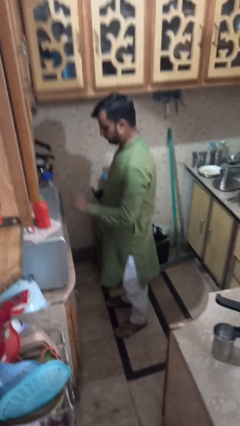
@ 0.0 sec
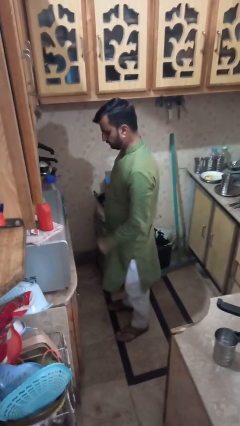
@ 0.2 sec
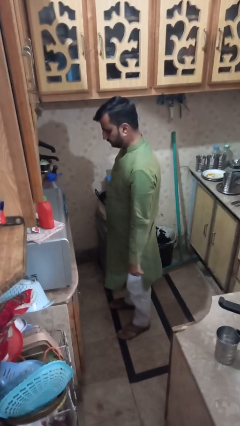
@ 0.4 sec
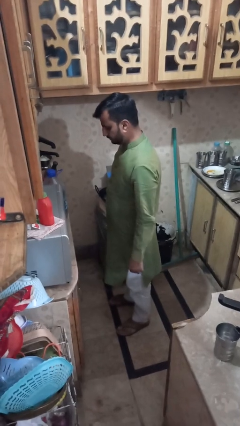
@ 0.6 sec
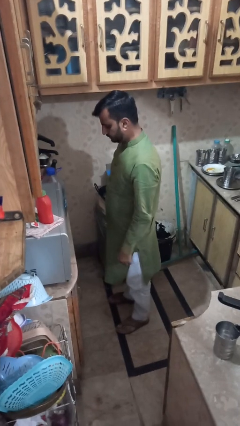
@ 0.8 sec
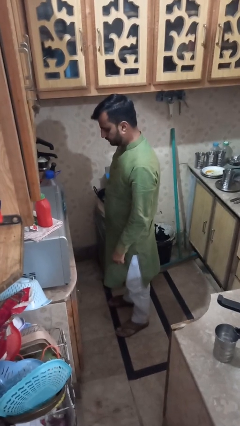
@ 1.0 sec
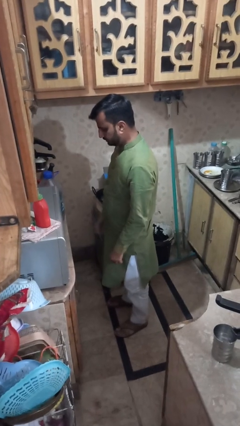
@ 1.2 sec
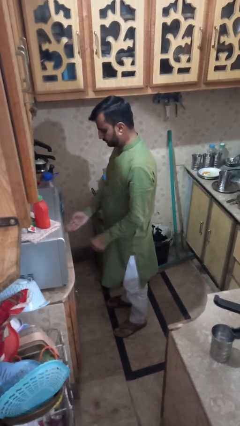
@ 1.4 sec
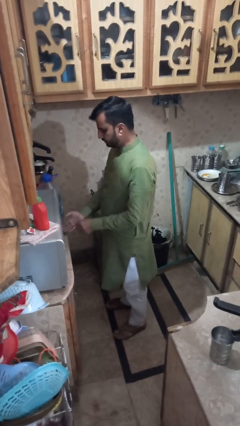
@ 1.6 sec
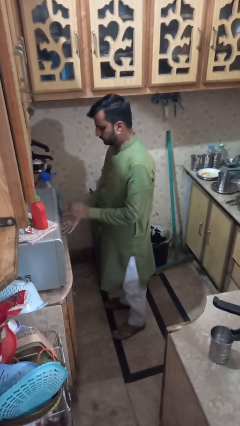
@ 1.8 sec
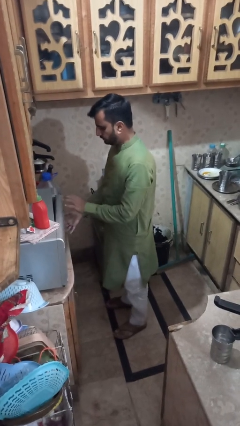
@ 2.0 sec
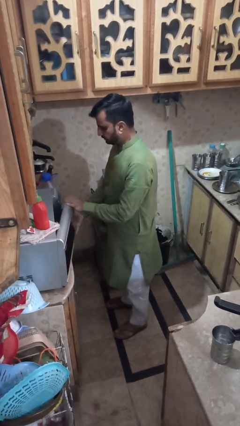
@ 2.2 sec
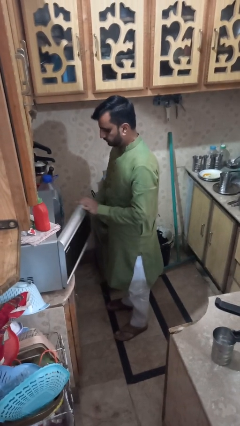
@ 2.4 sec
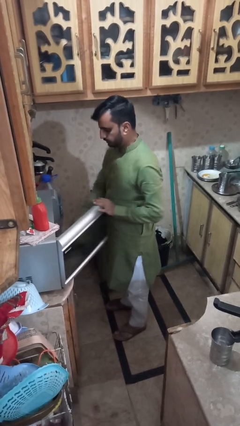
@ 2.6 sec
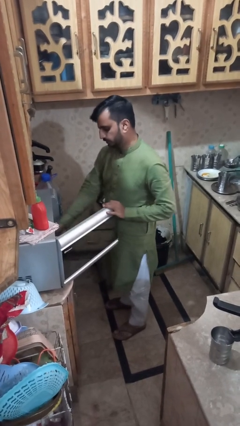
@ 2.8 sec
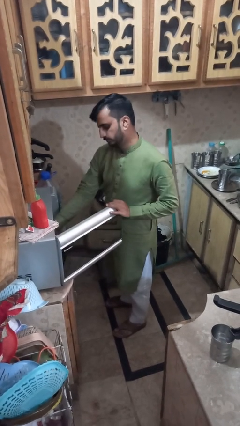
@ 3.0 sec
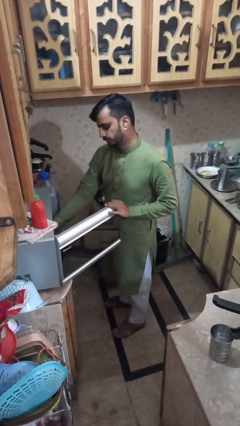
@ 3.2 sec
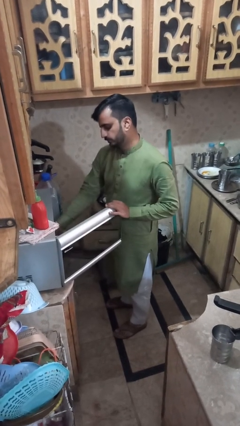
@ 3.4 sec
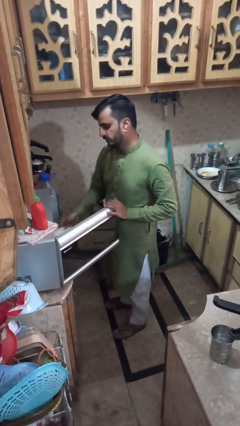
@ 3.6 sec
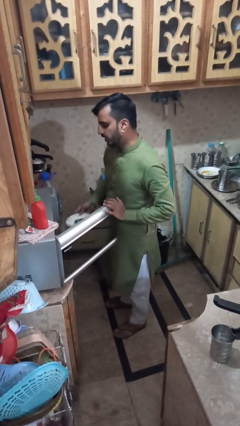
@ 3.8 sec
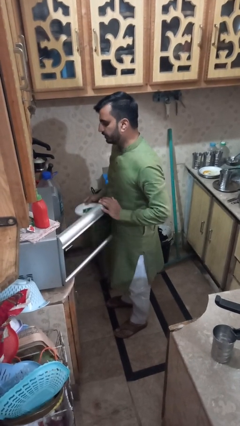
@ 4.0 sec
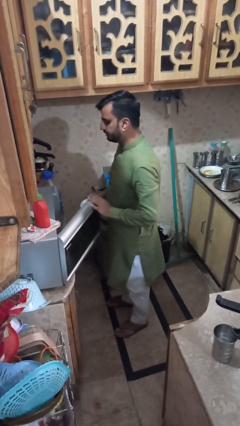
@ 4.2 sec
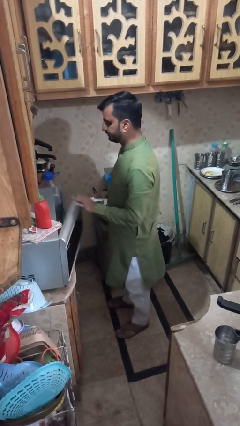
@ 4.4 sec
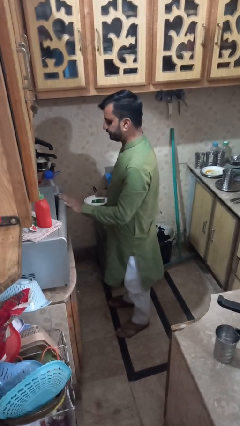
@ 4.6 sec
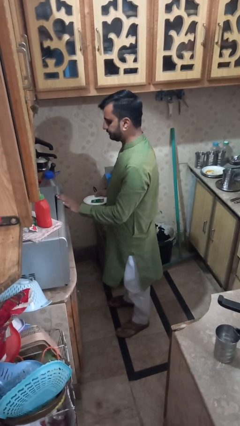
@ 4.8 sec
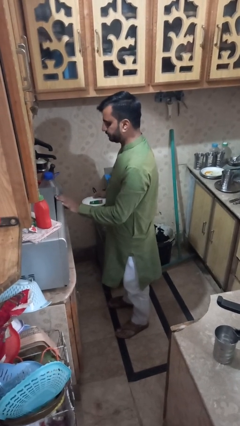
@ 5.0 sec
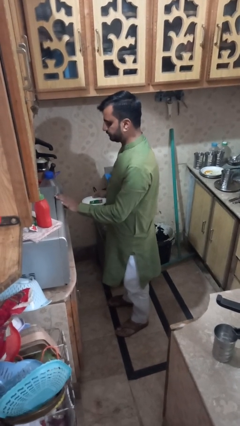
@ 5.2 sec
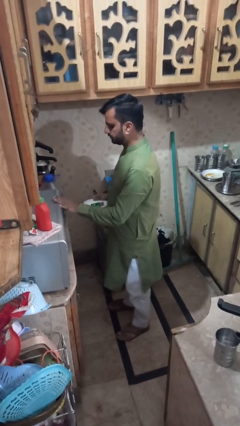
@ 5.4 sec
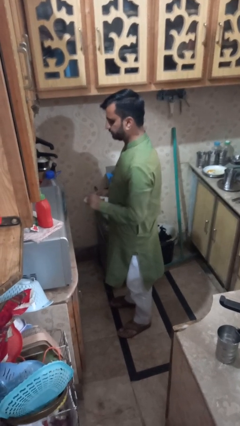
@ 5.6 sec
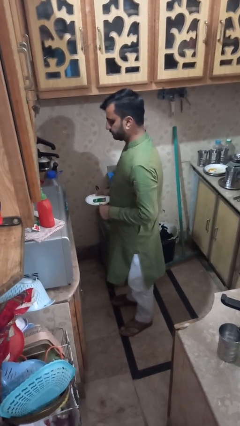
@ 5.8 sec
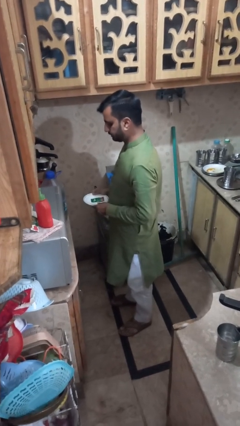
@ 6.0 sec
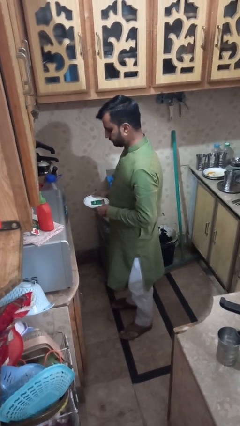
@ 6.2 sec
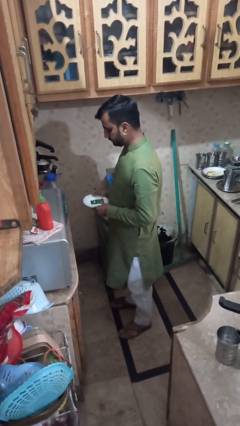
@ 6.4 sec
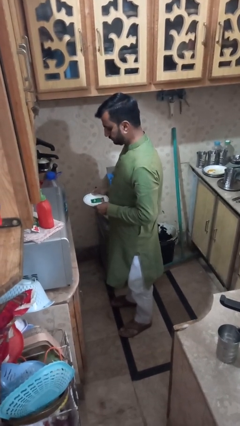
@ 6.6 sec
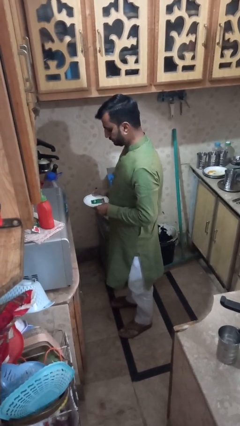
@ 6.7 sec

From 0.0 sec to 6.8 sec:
person takes object from microwave

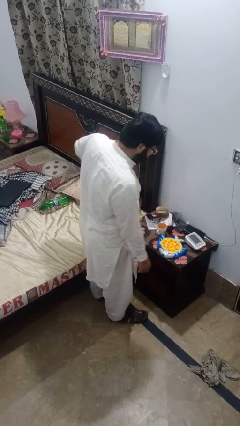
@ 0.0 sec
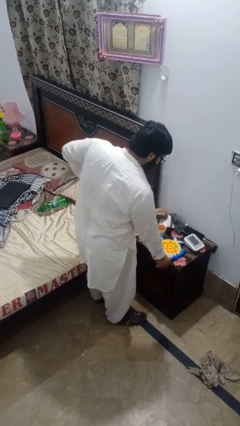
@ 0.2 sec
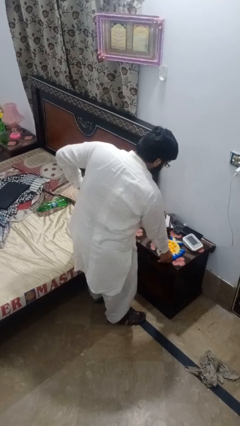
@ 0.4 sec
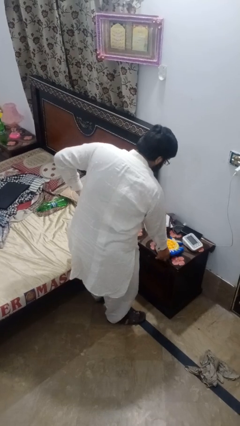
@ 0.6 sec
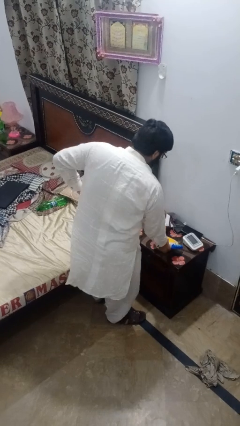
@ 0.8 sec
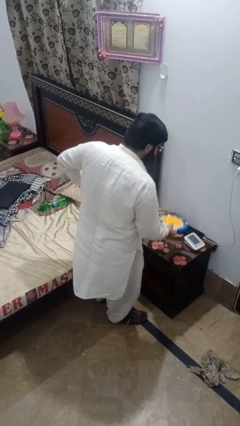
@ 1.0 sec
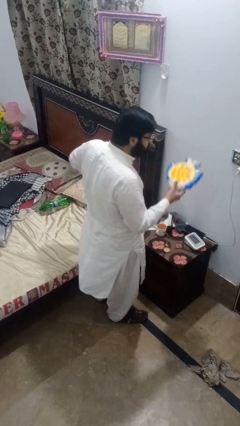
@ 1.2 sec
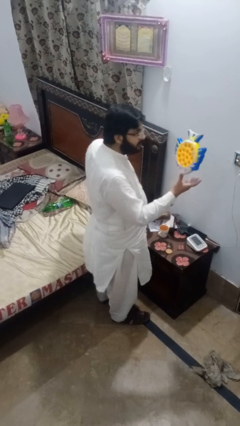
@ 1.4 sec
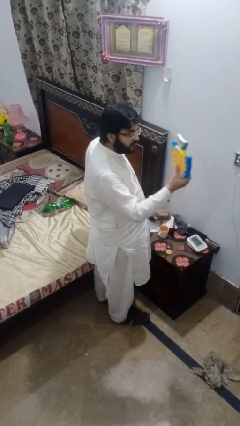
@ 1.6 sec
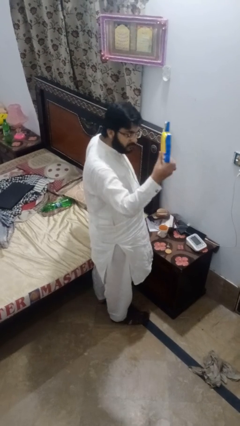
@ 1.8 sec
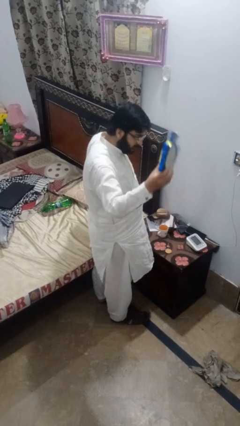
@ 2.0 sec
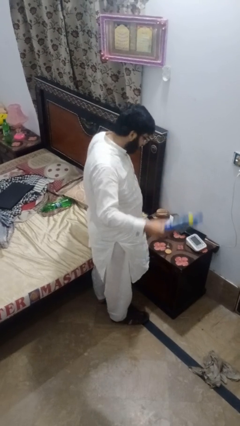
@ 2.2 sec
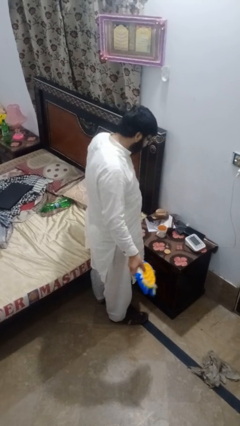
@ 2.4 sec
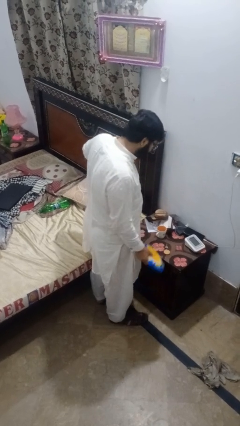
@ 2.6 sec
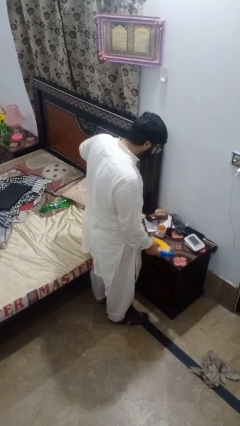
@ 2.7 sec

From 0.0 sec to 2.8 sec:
person picks up object from countertop

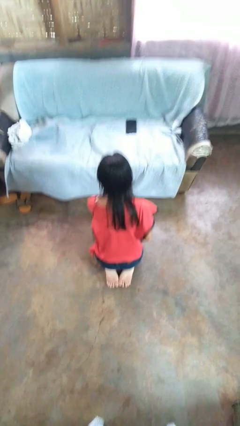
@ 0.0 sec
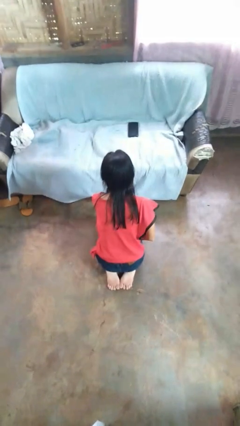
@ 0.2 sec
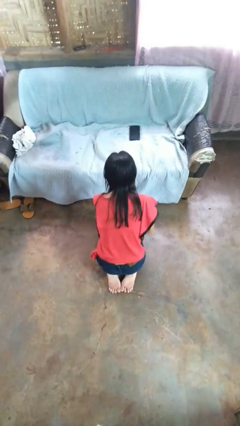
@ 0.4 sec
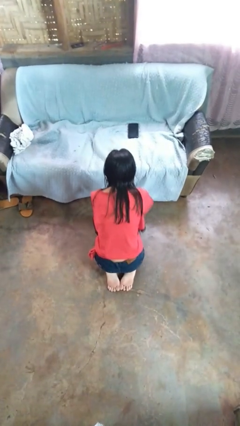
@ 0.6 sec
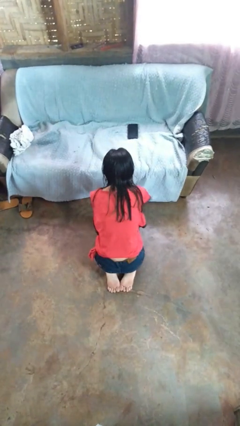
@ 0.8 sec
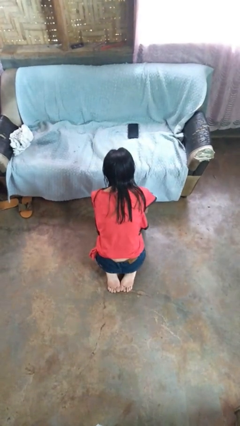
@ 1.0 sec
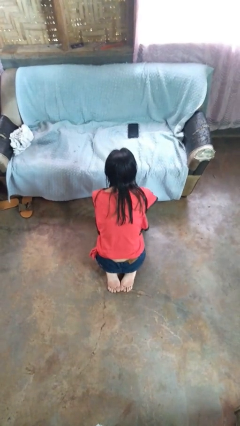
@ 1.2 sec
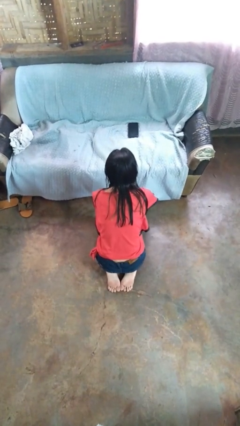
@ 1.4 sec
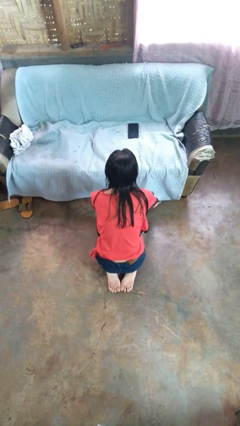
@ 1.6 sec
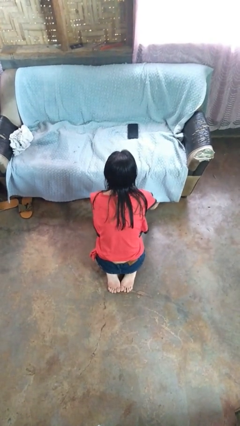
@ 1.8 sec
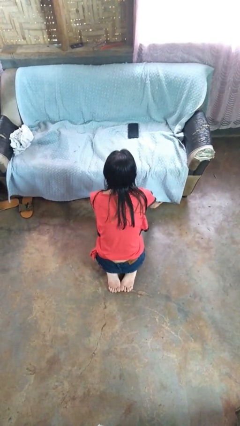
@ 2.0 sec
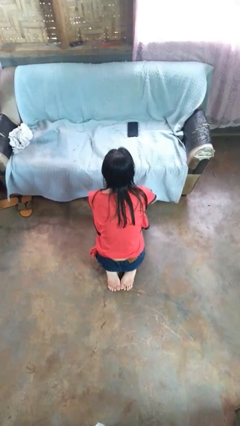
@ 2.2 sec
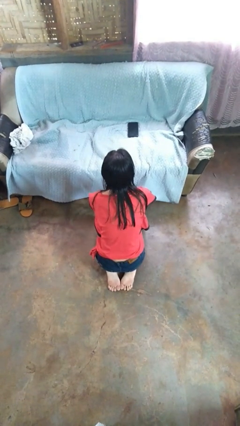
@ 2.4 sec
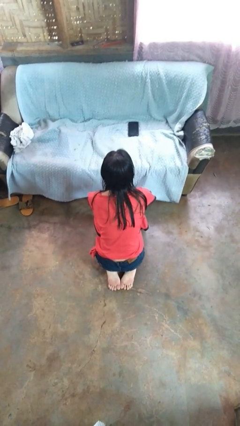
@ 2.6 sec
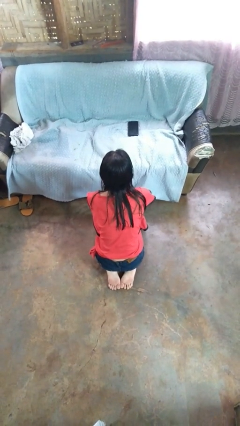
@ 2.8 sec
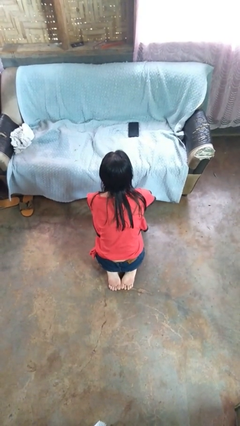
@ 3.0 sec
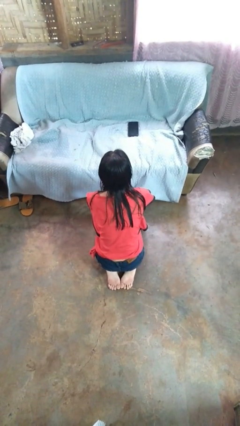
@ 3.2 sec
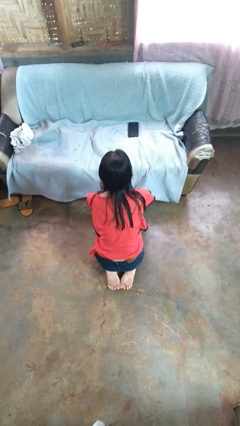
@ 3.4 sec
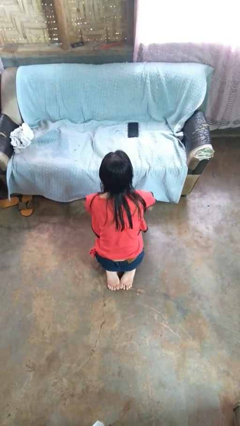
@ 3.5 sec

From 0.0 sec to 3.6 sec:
person searches under couch

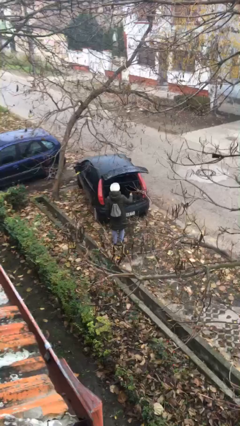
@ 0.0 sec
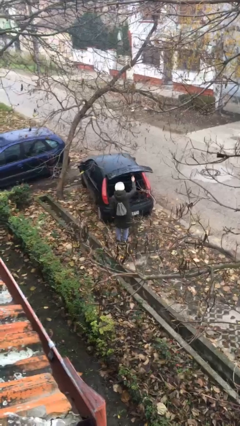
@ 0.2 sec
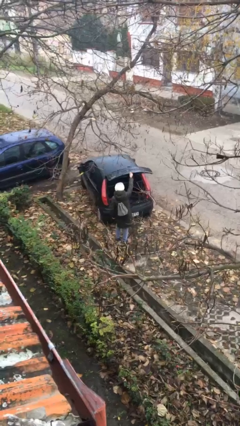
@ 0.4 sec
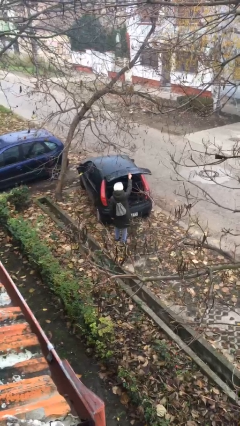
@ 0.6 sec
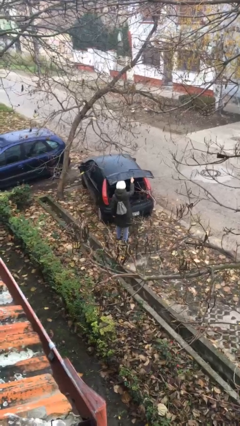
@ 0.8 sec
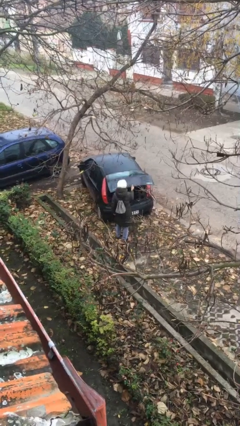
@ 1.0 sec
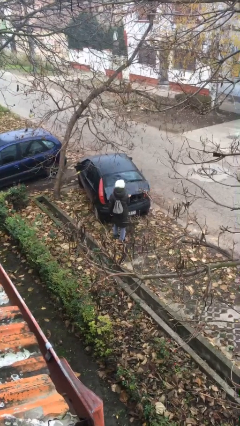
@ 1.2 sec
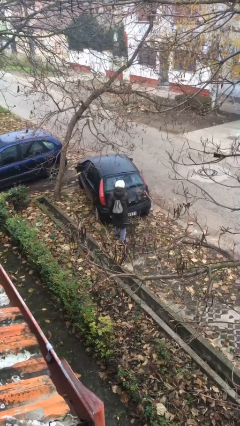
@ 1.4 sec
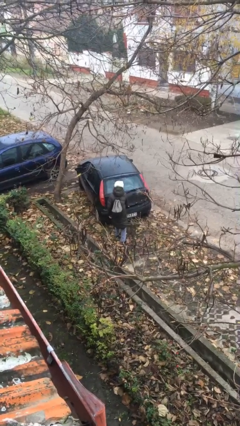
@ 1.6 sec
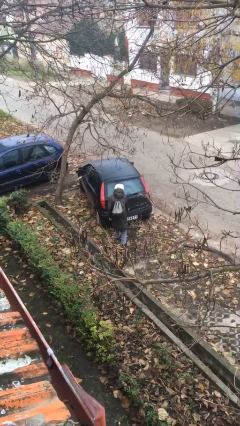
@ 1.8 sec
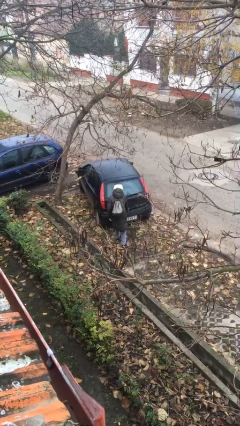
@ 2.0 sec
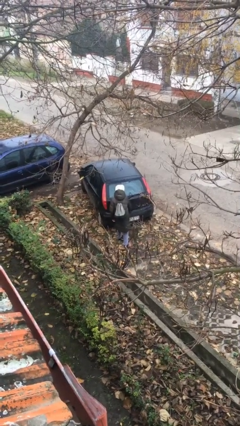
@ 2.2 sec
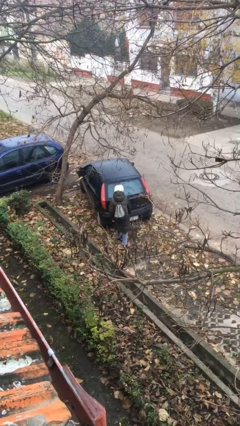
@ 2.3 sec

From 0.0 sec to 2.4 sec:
person closes car trunk

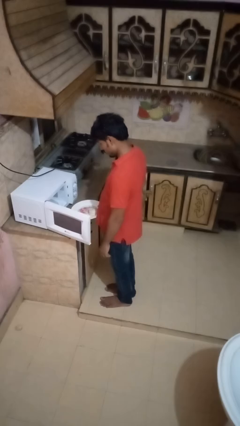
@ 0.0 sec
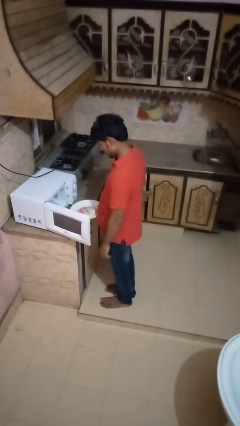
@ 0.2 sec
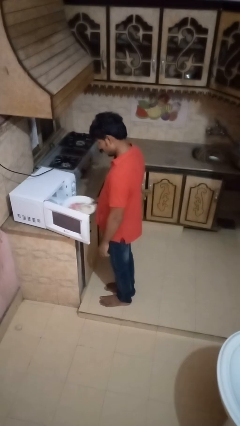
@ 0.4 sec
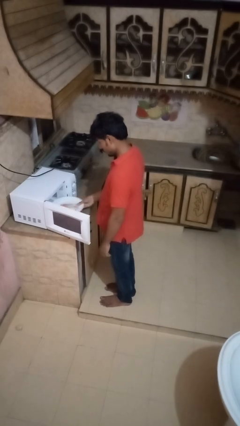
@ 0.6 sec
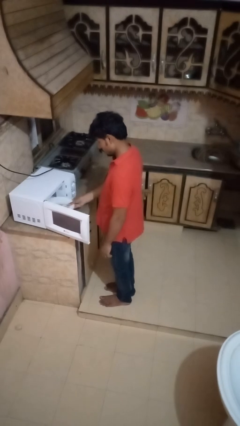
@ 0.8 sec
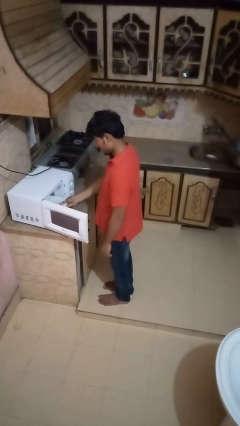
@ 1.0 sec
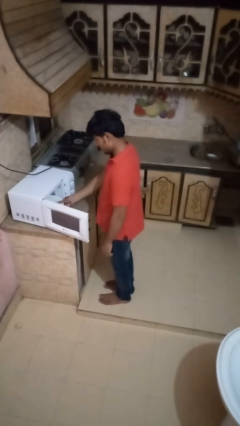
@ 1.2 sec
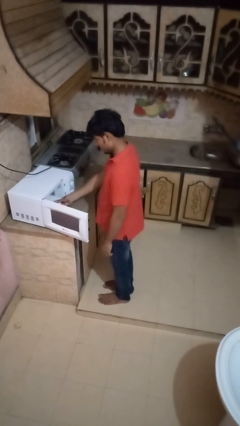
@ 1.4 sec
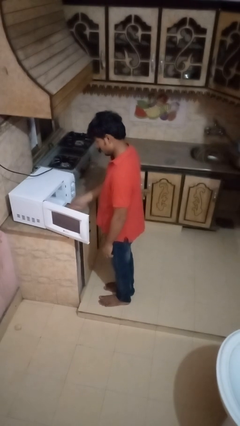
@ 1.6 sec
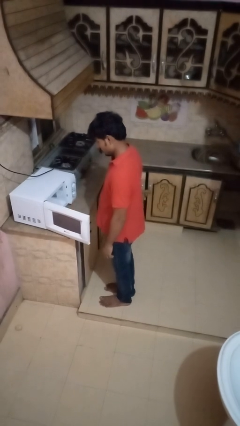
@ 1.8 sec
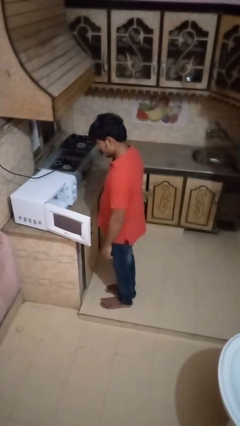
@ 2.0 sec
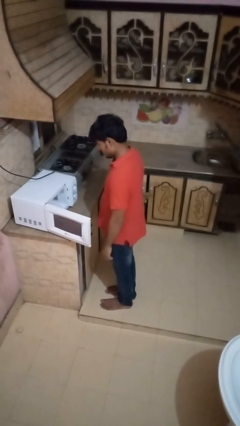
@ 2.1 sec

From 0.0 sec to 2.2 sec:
person puts object into oven
